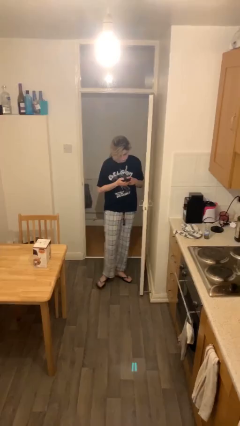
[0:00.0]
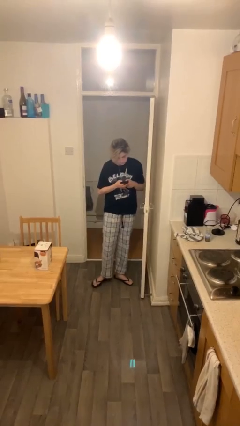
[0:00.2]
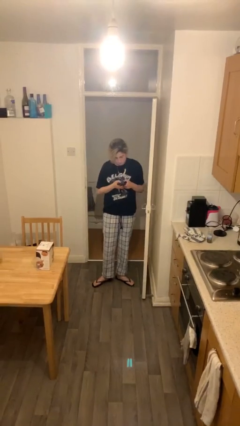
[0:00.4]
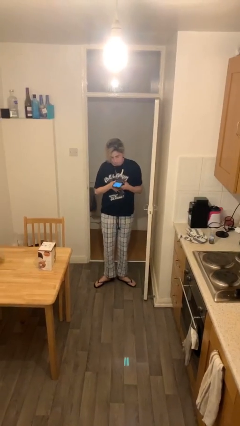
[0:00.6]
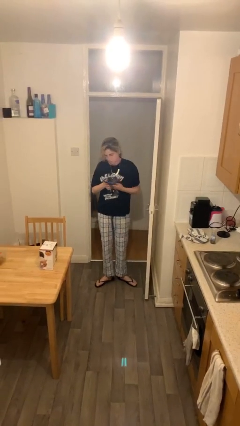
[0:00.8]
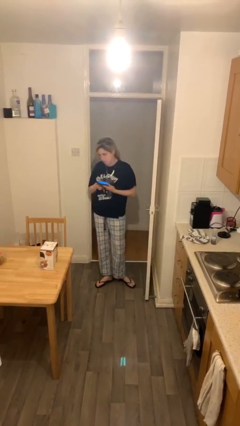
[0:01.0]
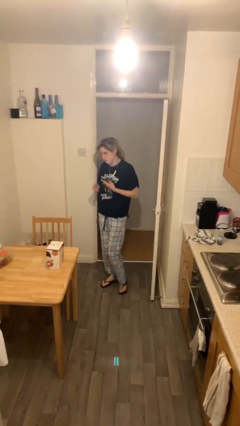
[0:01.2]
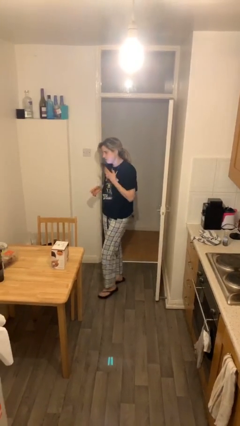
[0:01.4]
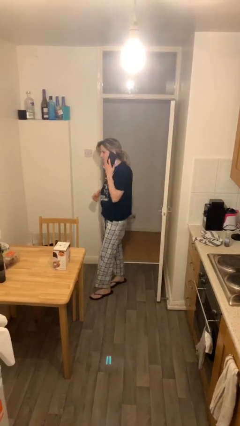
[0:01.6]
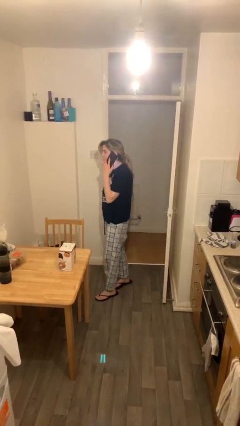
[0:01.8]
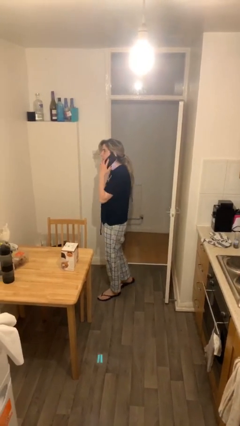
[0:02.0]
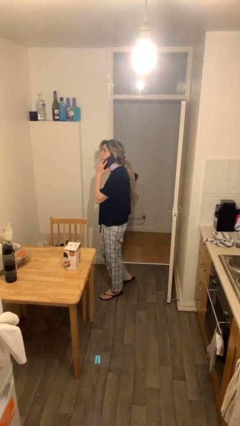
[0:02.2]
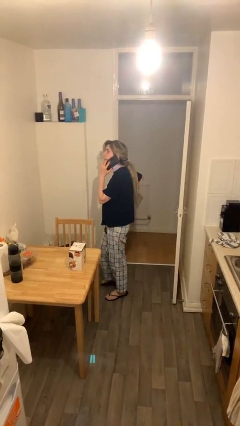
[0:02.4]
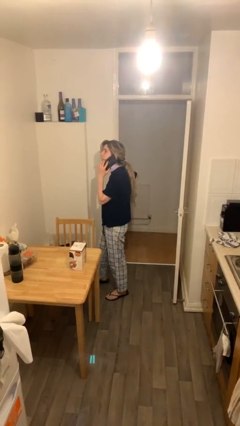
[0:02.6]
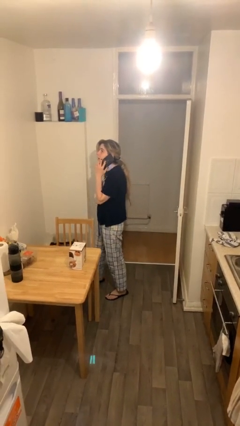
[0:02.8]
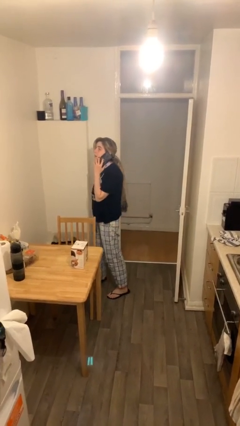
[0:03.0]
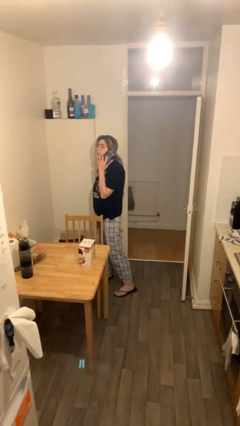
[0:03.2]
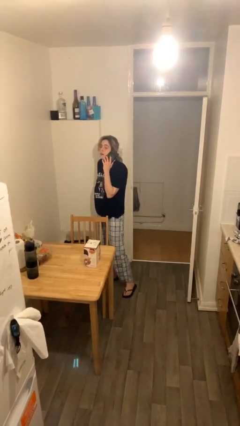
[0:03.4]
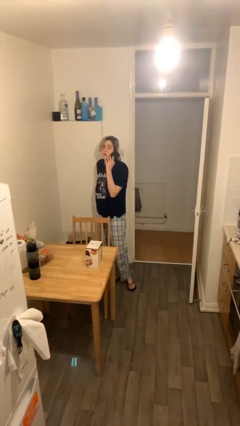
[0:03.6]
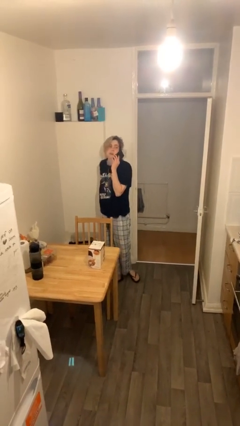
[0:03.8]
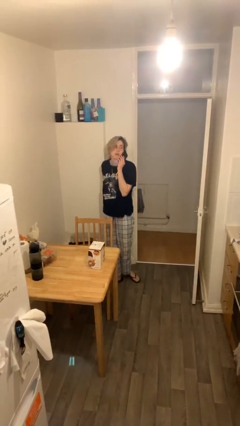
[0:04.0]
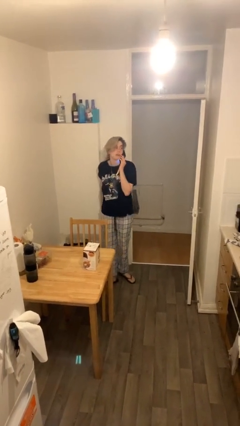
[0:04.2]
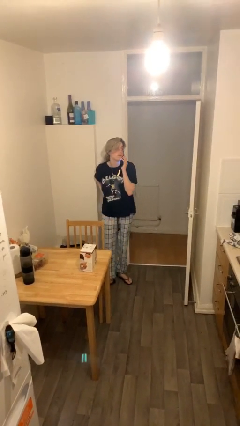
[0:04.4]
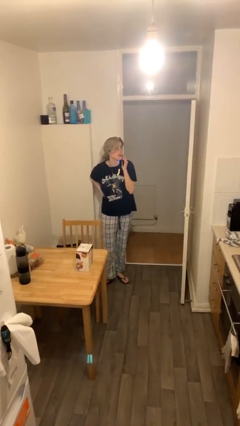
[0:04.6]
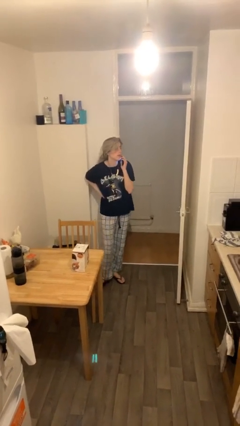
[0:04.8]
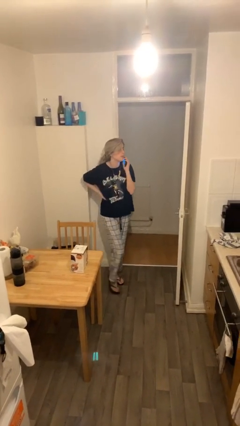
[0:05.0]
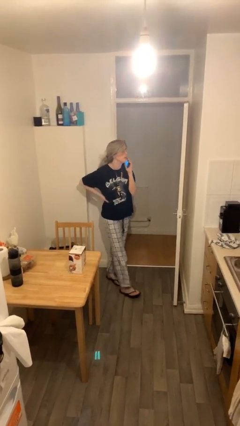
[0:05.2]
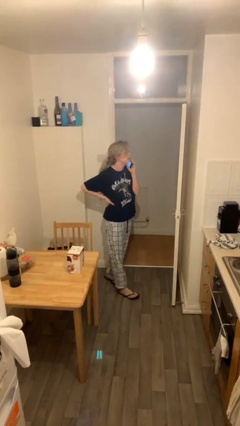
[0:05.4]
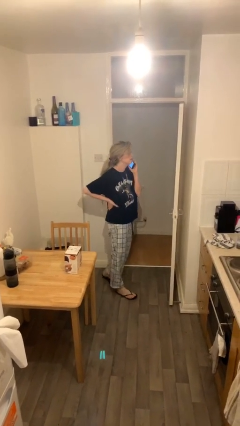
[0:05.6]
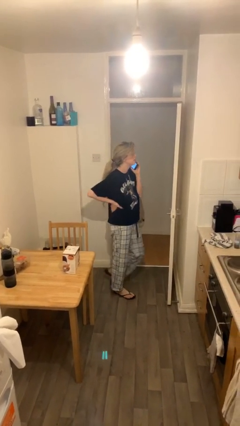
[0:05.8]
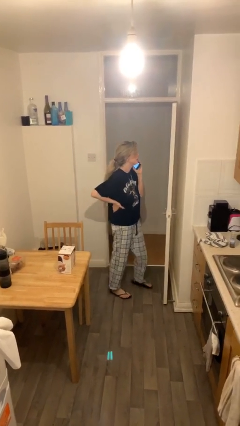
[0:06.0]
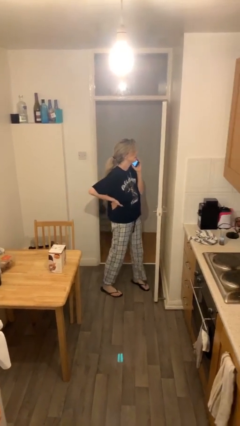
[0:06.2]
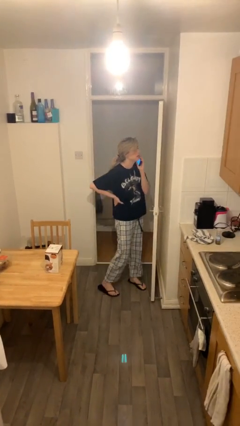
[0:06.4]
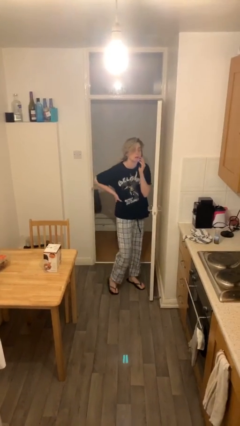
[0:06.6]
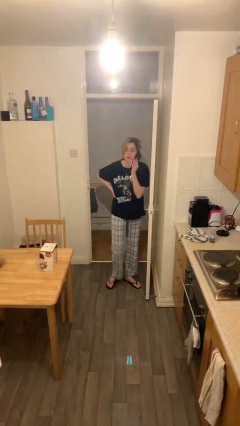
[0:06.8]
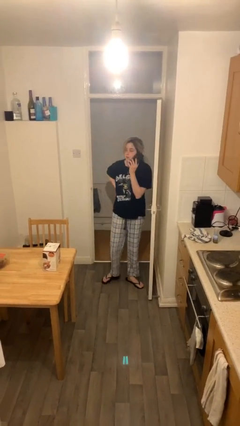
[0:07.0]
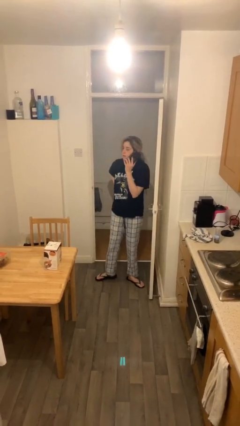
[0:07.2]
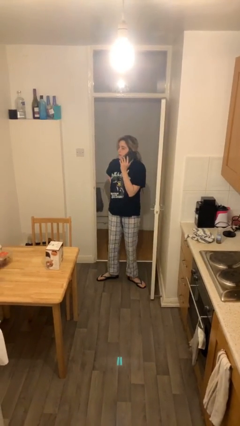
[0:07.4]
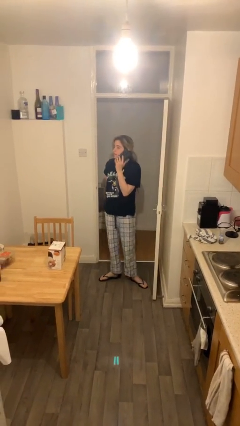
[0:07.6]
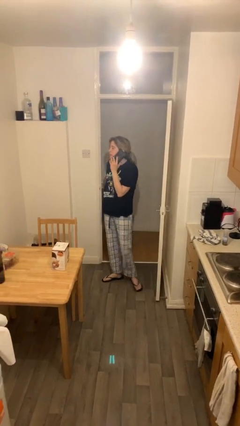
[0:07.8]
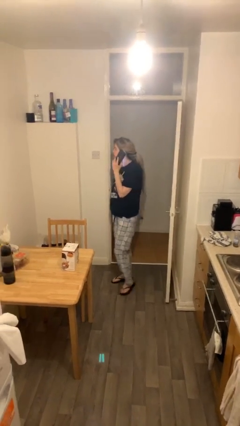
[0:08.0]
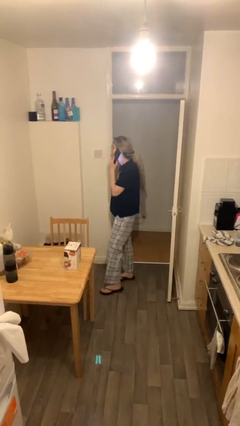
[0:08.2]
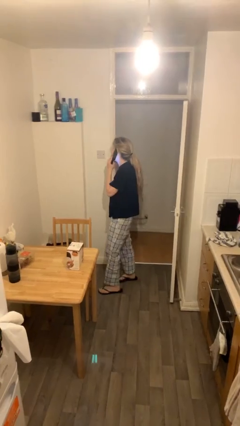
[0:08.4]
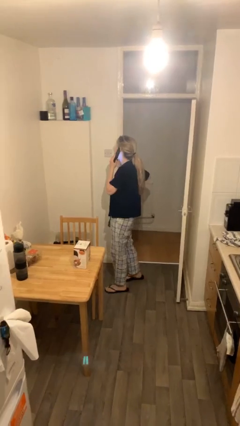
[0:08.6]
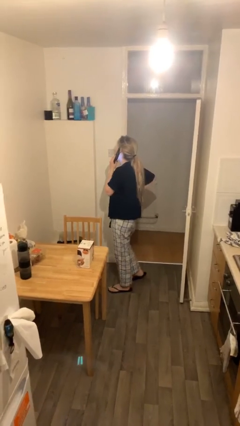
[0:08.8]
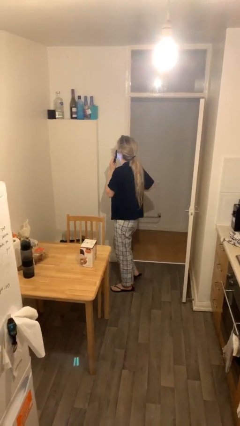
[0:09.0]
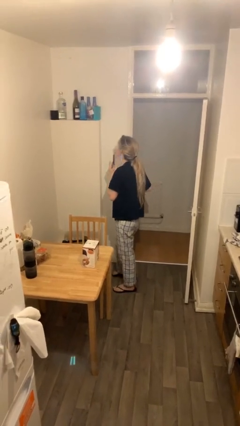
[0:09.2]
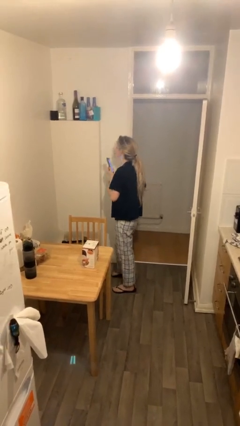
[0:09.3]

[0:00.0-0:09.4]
person talks on phone

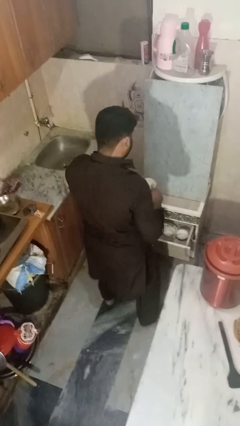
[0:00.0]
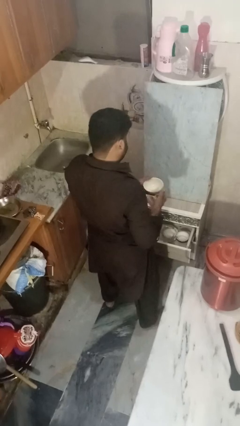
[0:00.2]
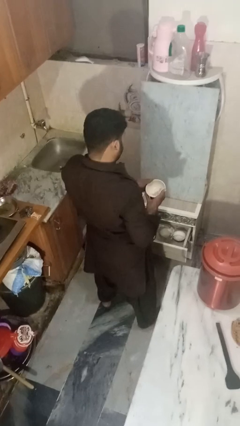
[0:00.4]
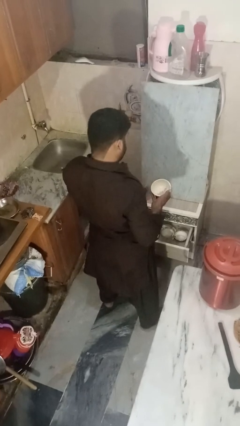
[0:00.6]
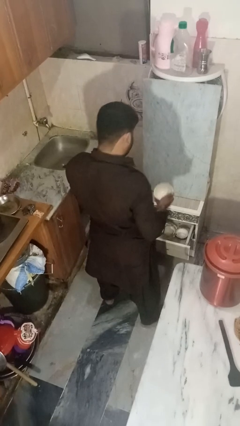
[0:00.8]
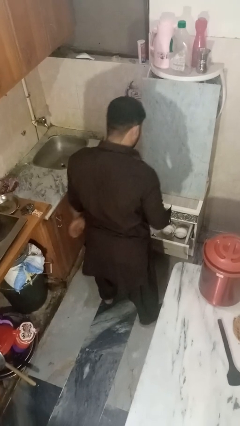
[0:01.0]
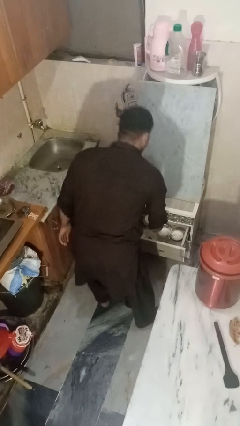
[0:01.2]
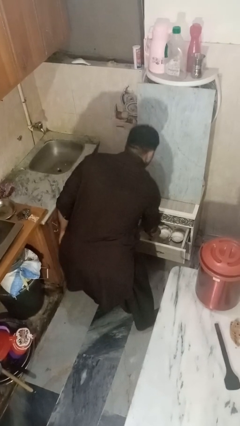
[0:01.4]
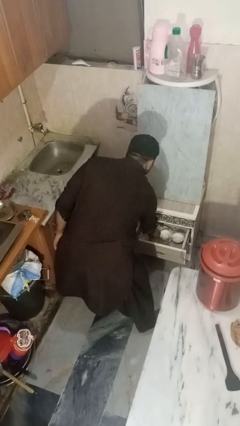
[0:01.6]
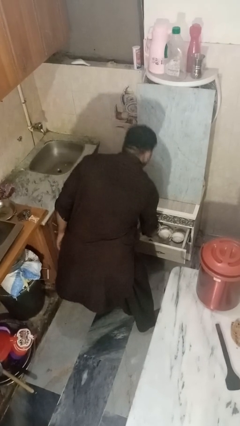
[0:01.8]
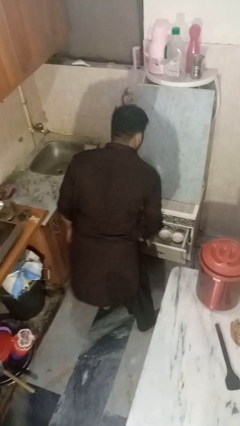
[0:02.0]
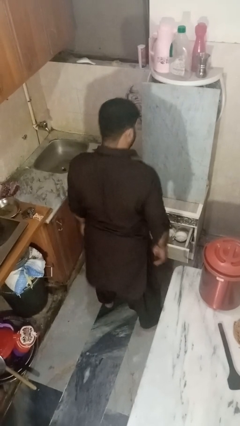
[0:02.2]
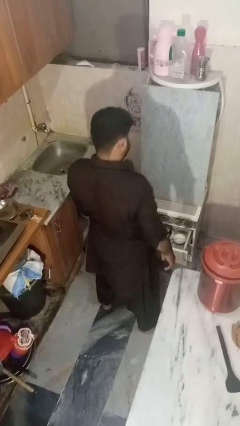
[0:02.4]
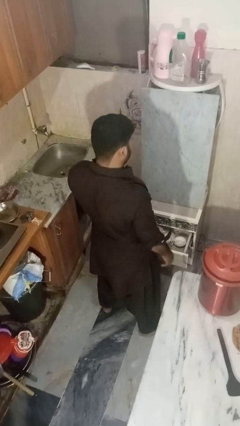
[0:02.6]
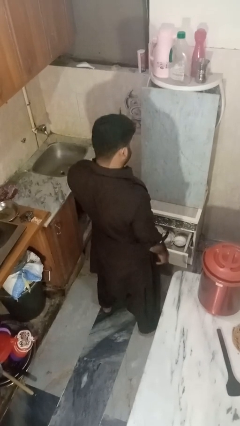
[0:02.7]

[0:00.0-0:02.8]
person puts object into kitchen drawer

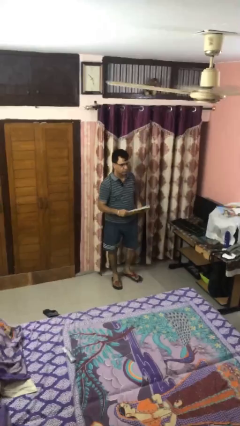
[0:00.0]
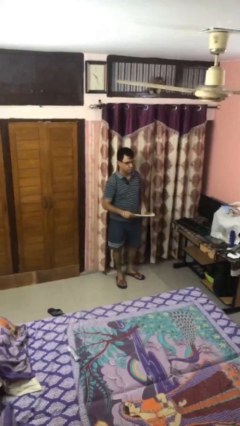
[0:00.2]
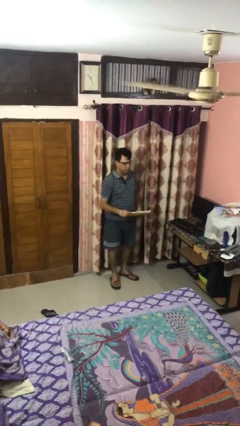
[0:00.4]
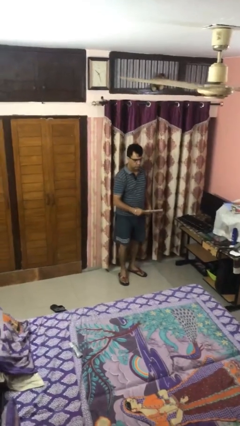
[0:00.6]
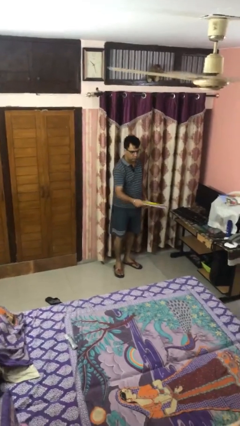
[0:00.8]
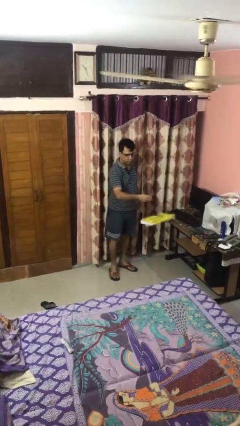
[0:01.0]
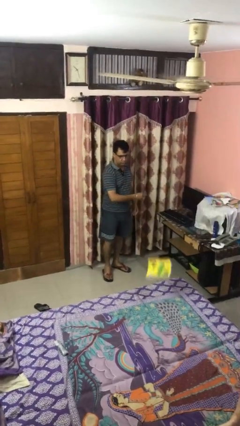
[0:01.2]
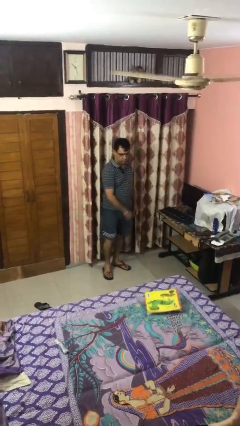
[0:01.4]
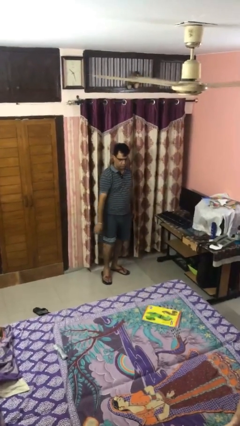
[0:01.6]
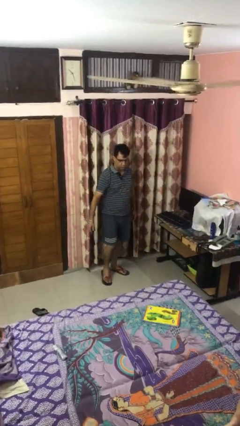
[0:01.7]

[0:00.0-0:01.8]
person throws object on bed

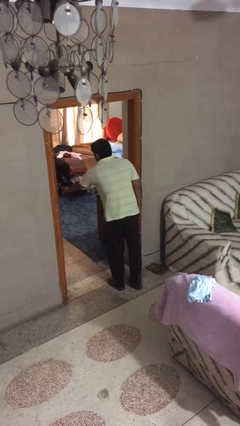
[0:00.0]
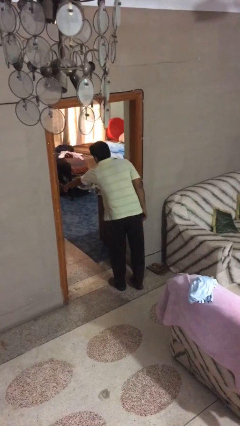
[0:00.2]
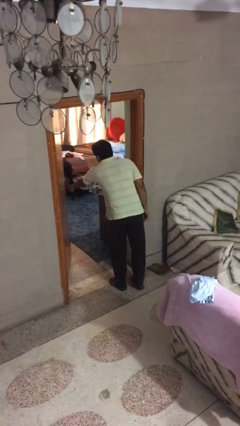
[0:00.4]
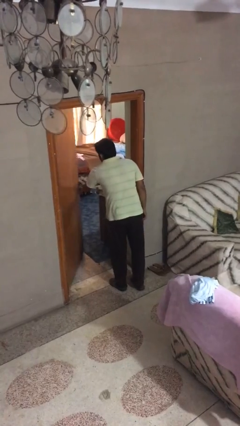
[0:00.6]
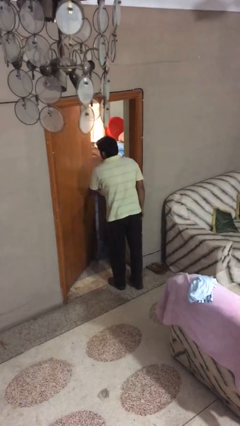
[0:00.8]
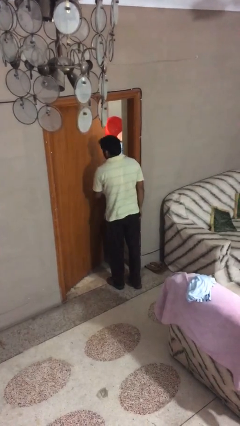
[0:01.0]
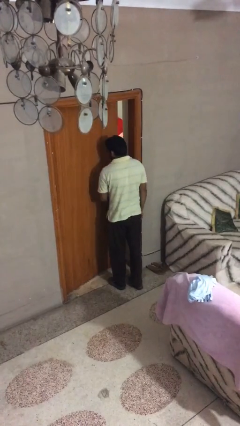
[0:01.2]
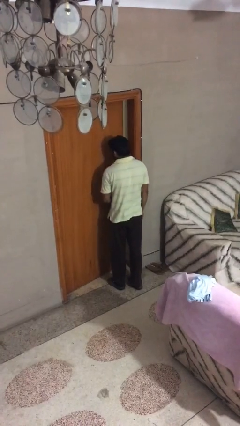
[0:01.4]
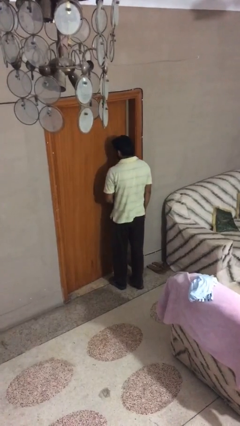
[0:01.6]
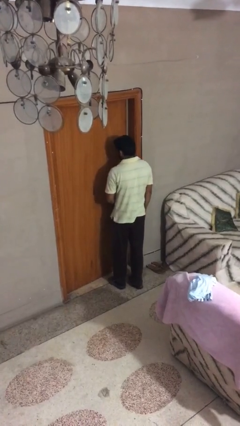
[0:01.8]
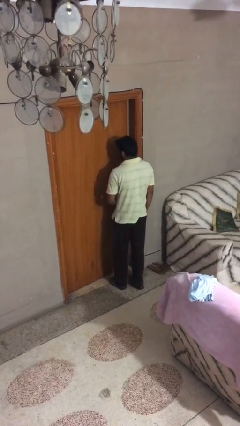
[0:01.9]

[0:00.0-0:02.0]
person closes facility door

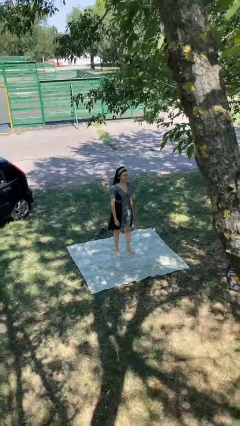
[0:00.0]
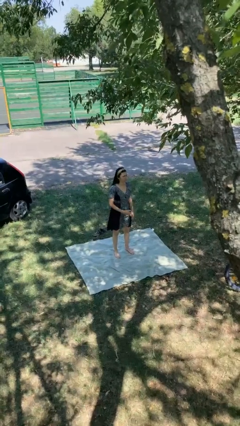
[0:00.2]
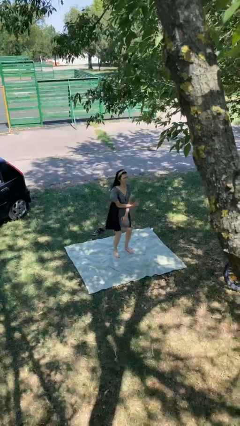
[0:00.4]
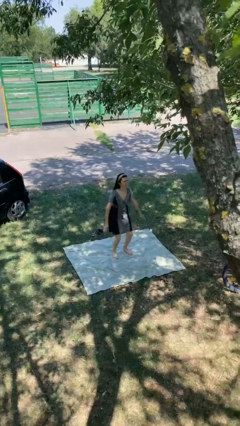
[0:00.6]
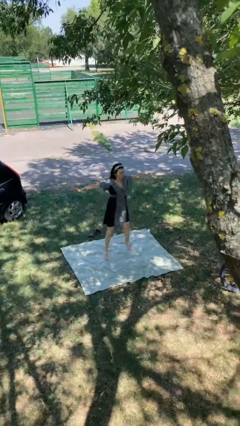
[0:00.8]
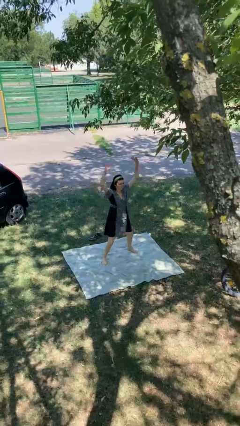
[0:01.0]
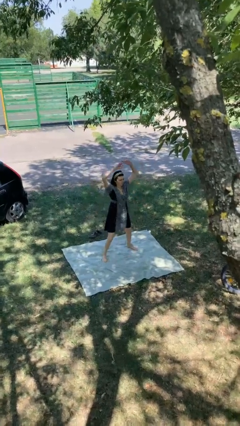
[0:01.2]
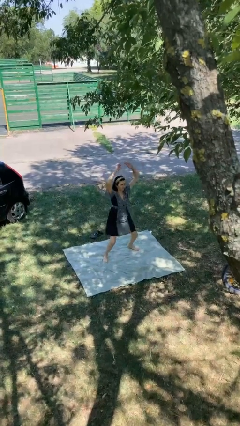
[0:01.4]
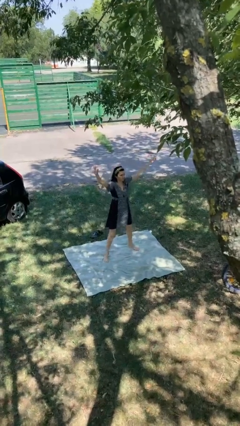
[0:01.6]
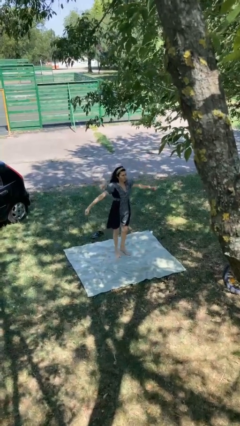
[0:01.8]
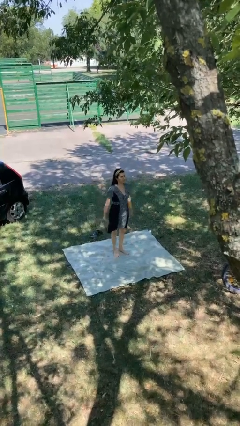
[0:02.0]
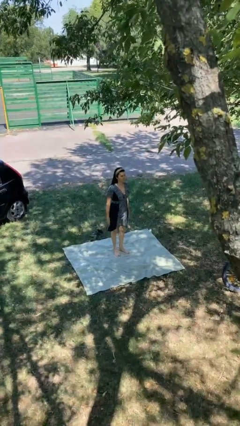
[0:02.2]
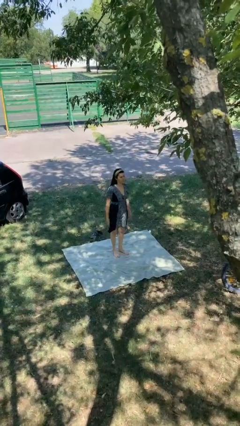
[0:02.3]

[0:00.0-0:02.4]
person exercises with jumping jacks
